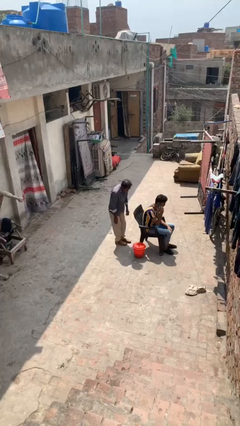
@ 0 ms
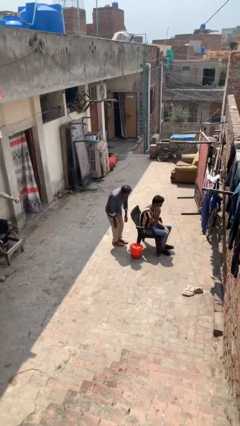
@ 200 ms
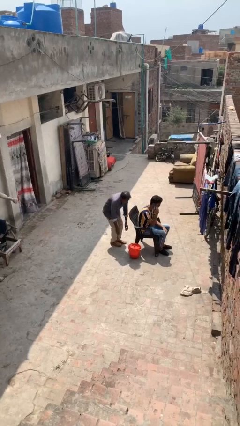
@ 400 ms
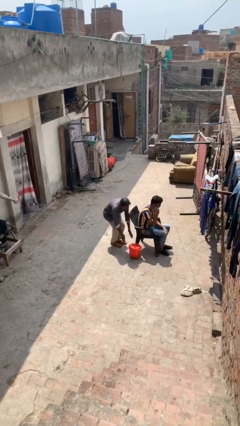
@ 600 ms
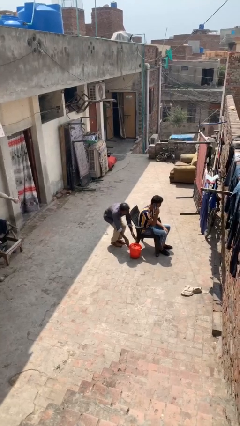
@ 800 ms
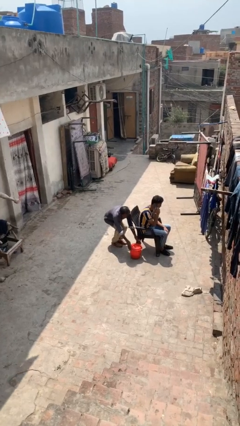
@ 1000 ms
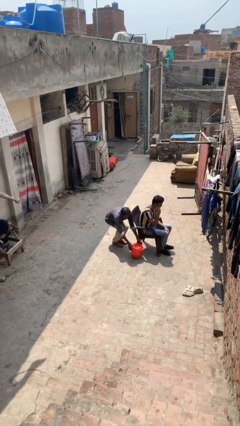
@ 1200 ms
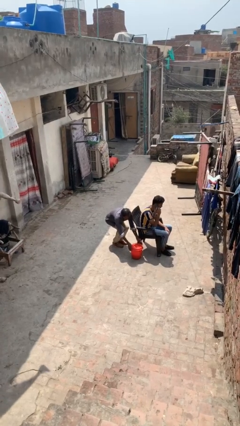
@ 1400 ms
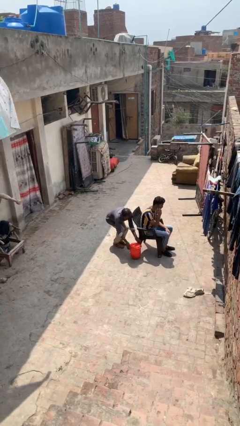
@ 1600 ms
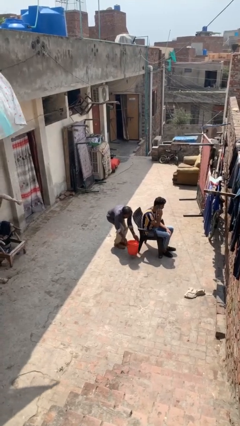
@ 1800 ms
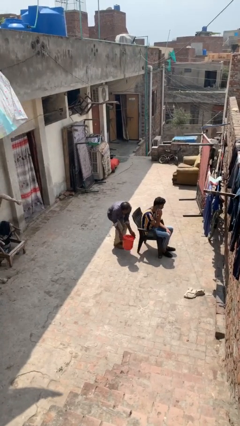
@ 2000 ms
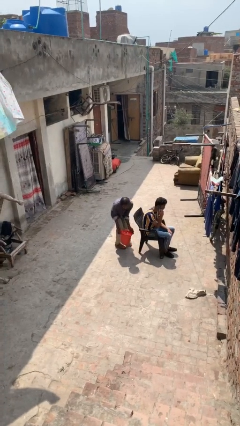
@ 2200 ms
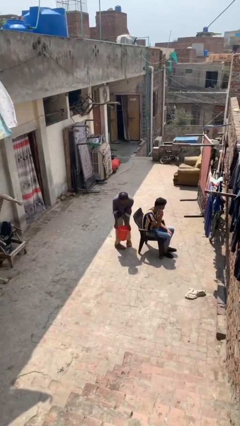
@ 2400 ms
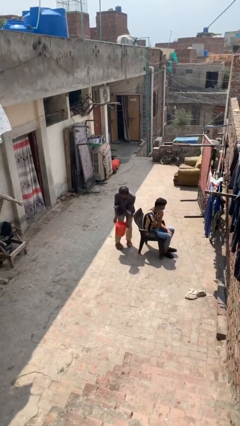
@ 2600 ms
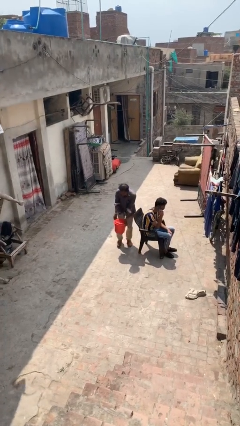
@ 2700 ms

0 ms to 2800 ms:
person steals object from person

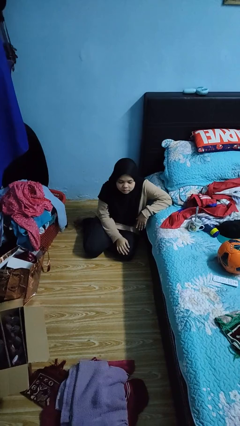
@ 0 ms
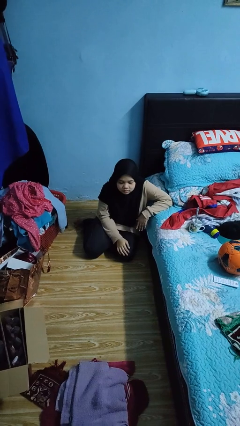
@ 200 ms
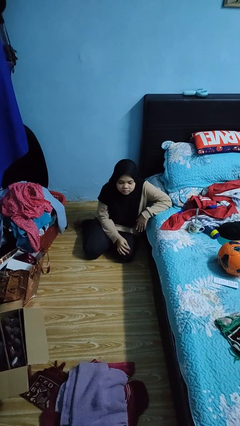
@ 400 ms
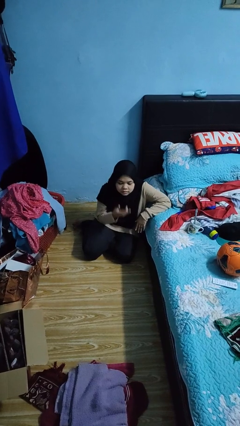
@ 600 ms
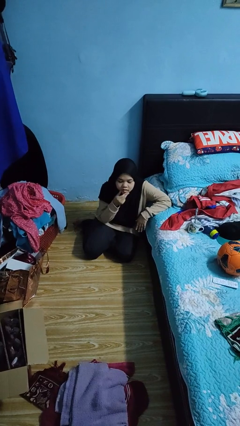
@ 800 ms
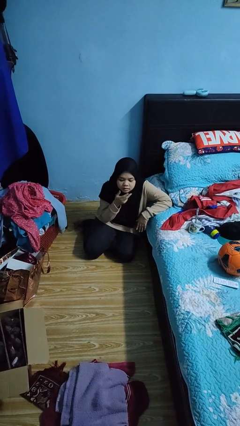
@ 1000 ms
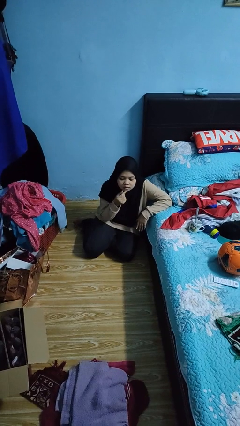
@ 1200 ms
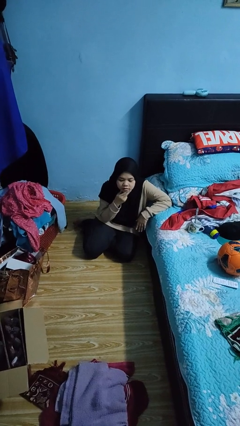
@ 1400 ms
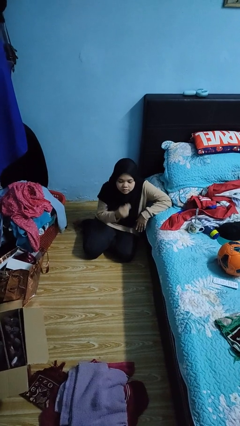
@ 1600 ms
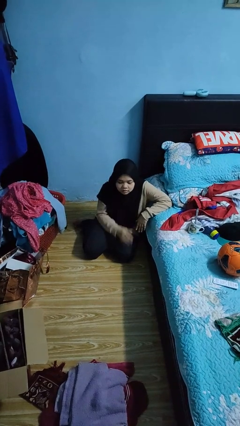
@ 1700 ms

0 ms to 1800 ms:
person strokes chin

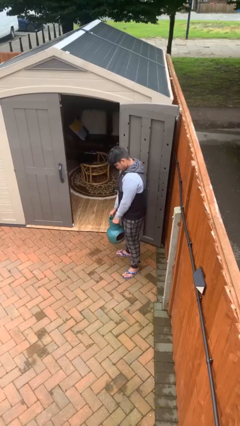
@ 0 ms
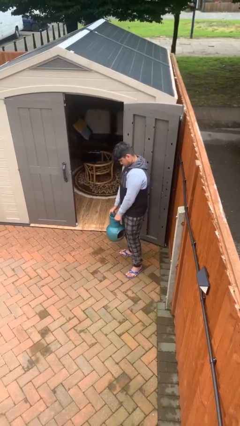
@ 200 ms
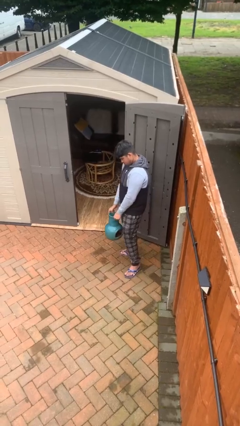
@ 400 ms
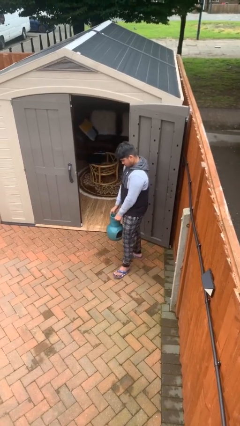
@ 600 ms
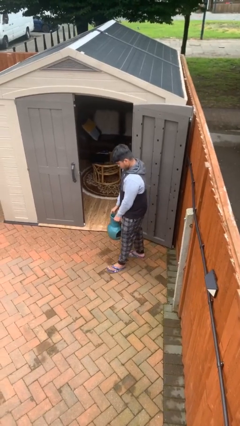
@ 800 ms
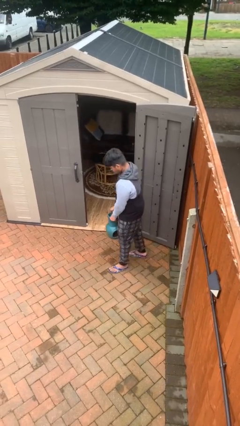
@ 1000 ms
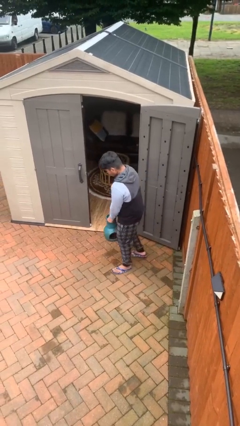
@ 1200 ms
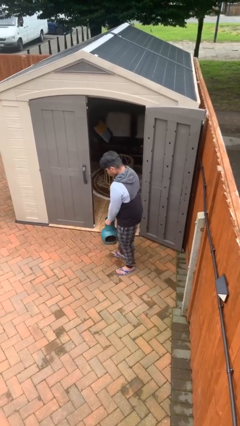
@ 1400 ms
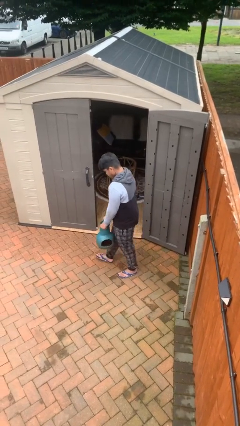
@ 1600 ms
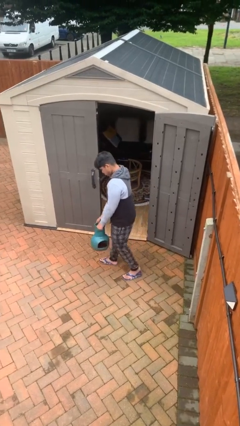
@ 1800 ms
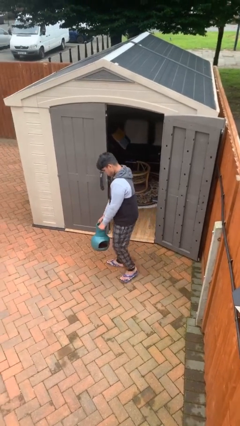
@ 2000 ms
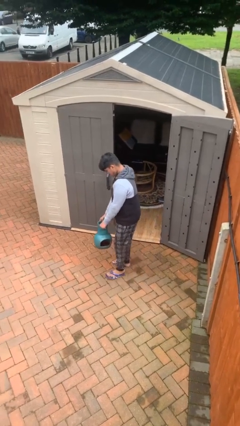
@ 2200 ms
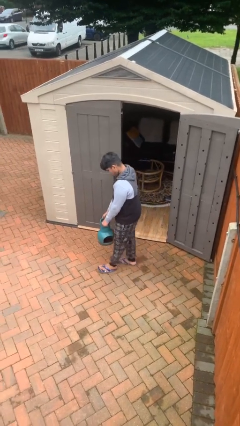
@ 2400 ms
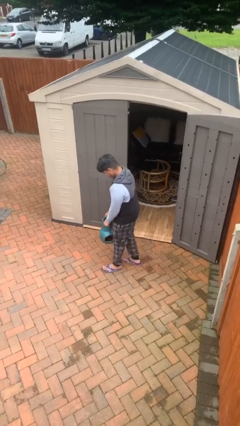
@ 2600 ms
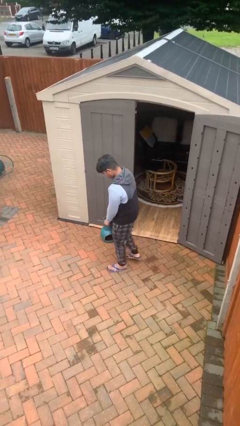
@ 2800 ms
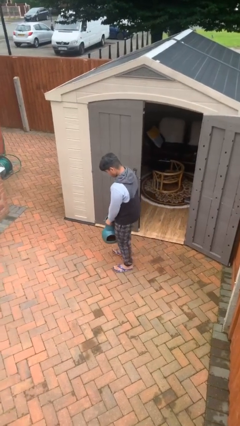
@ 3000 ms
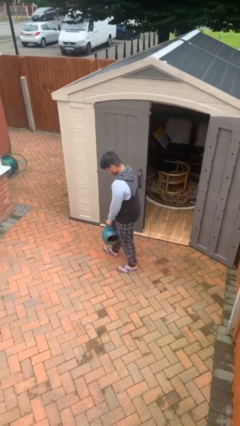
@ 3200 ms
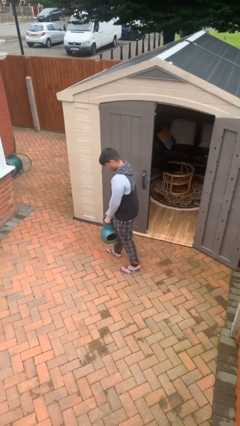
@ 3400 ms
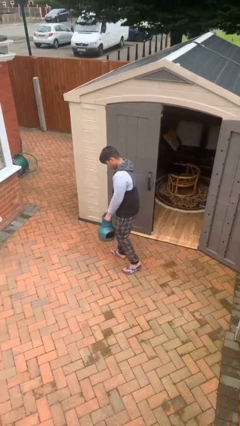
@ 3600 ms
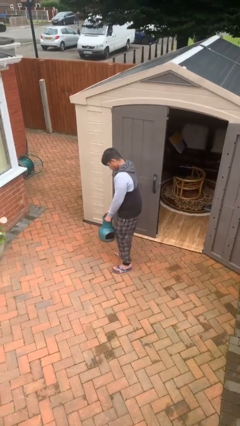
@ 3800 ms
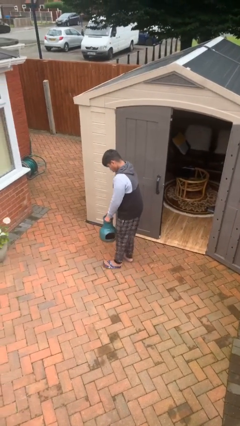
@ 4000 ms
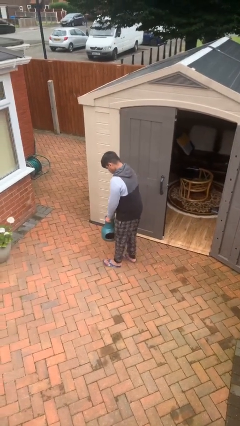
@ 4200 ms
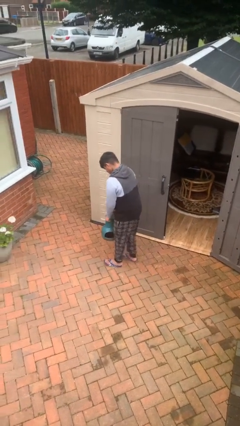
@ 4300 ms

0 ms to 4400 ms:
person carries heavy object

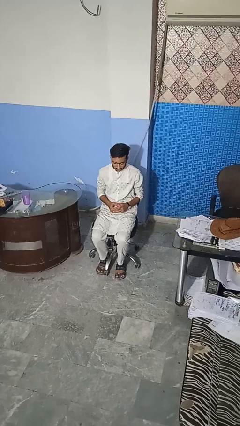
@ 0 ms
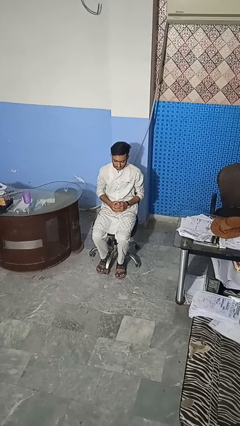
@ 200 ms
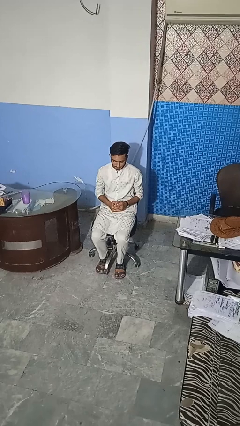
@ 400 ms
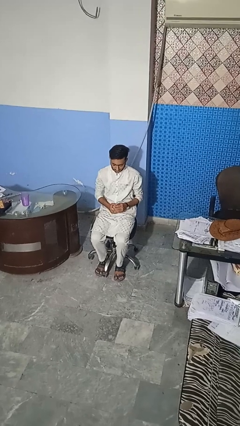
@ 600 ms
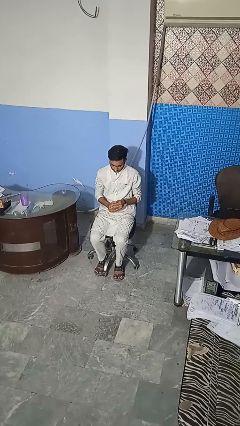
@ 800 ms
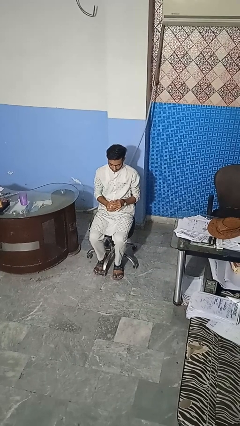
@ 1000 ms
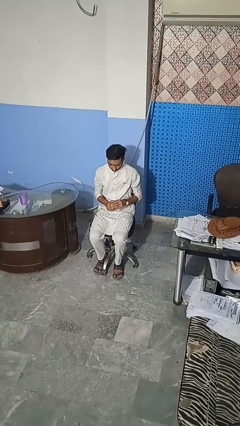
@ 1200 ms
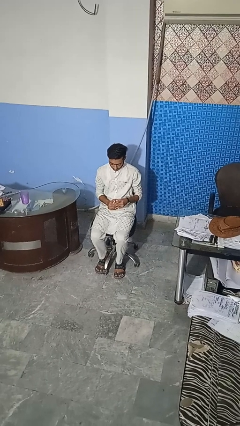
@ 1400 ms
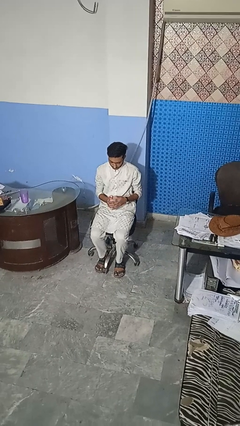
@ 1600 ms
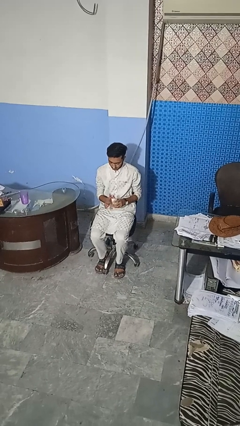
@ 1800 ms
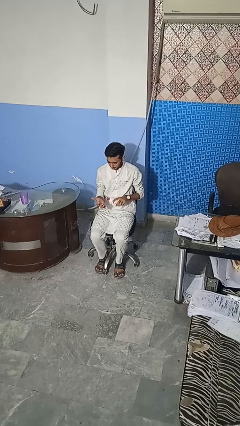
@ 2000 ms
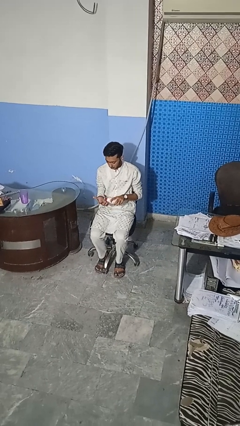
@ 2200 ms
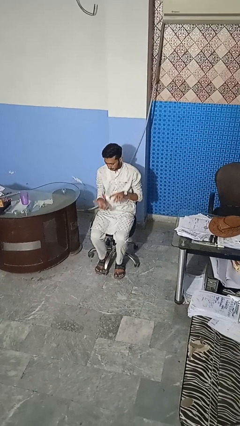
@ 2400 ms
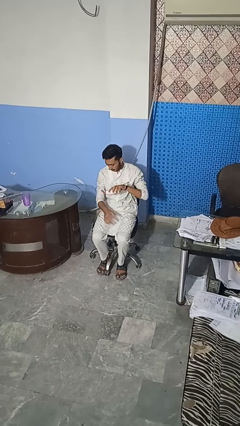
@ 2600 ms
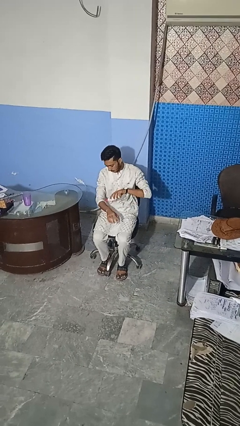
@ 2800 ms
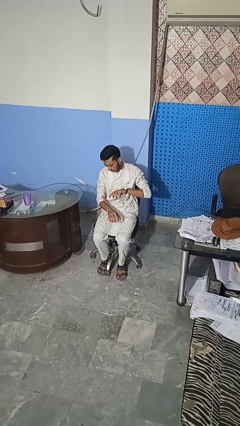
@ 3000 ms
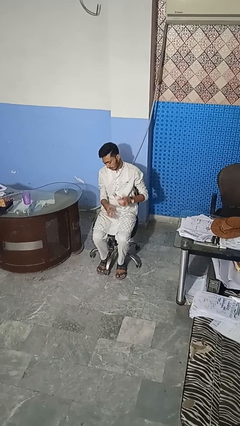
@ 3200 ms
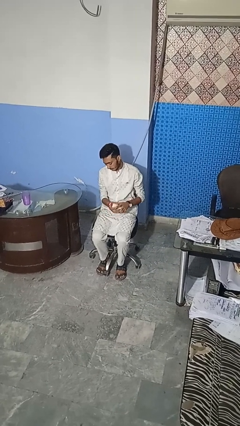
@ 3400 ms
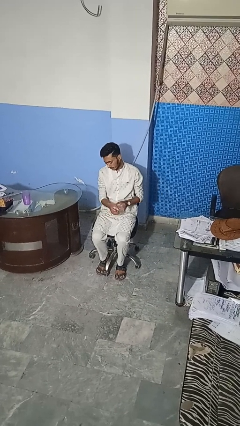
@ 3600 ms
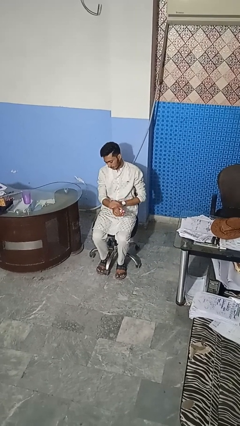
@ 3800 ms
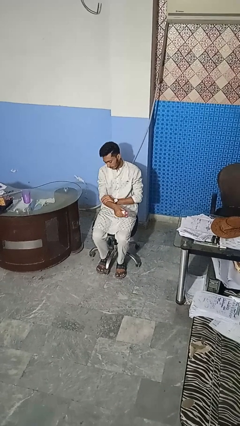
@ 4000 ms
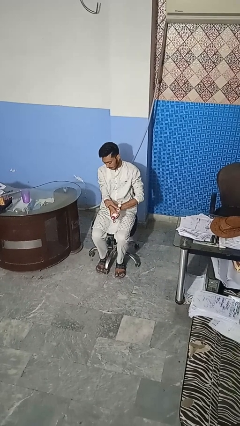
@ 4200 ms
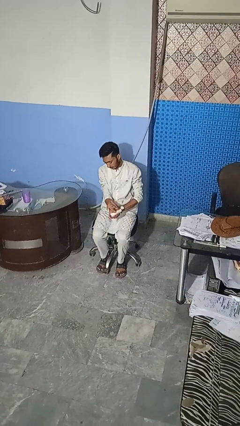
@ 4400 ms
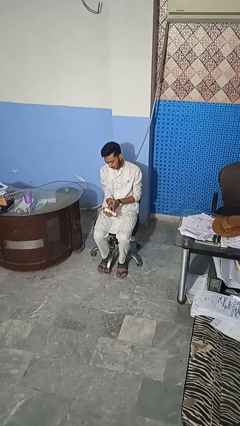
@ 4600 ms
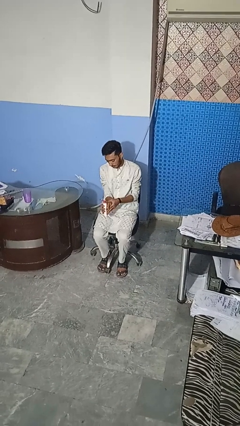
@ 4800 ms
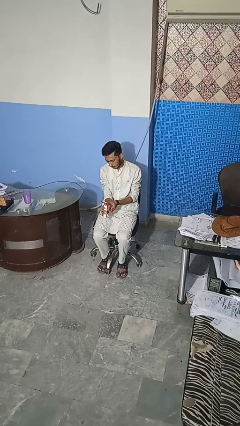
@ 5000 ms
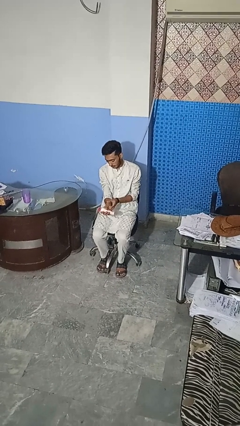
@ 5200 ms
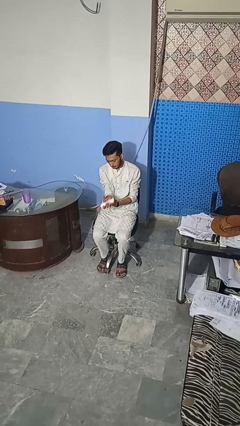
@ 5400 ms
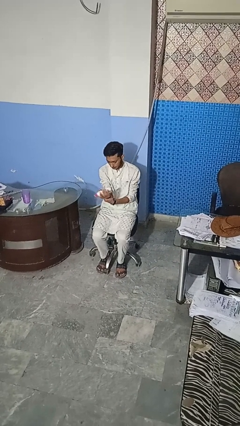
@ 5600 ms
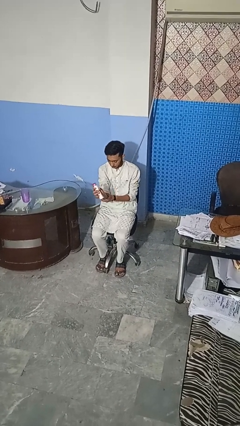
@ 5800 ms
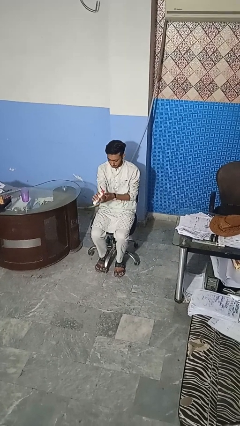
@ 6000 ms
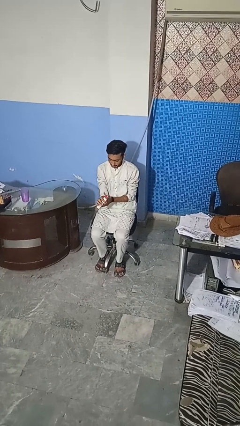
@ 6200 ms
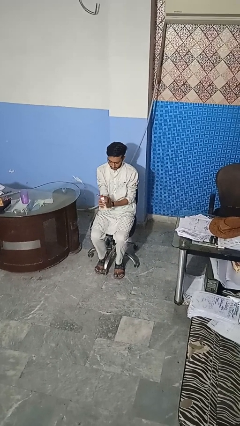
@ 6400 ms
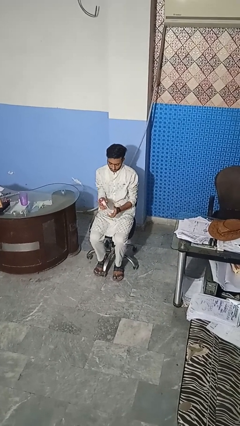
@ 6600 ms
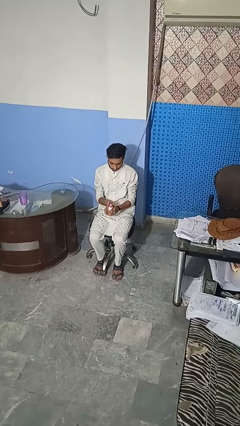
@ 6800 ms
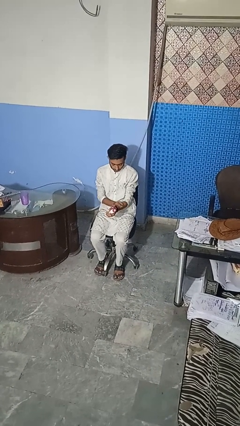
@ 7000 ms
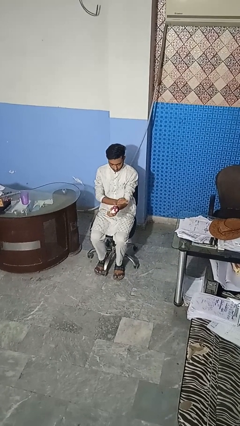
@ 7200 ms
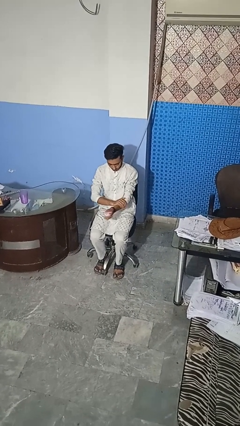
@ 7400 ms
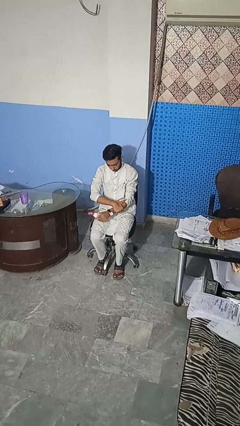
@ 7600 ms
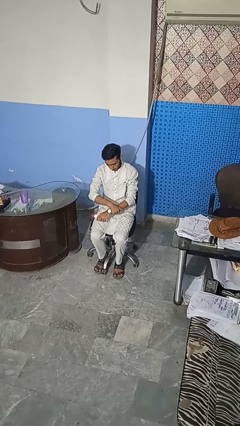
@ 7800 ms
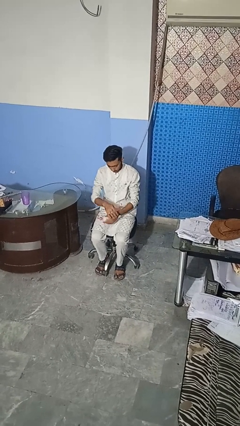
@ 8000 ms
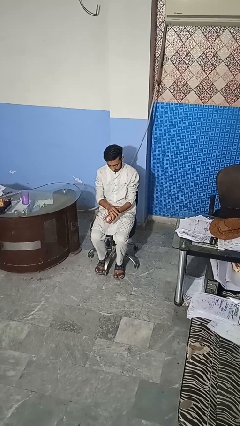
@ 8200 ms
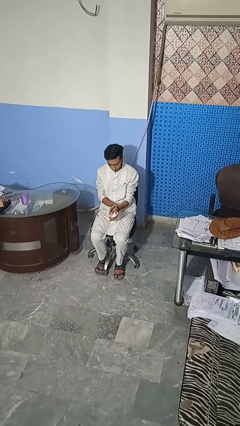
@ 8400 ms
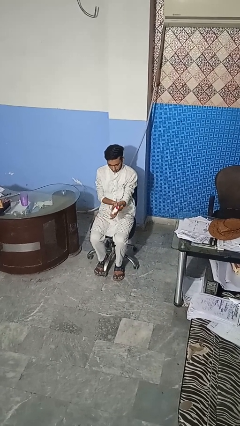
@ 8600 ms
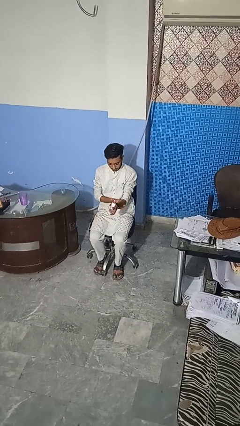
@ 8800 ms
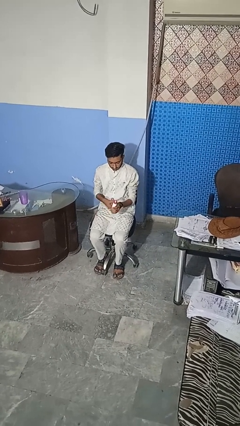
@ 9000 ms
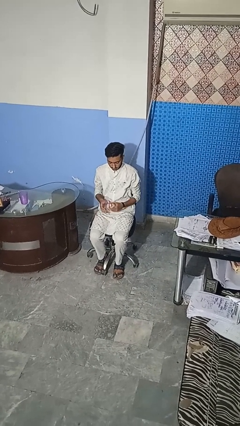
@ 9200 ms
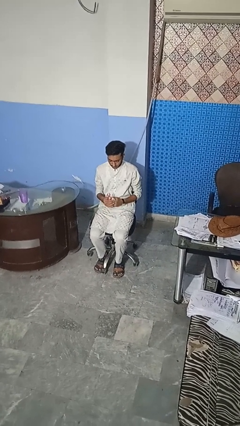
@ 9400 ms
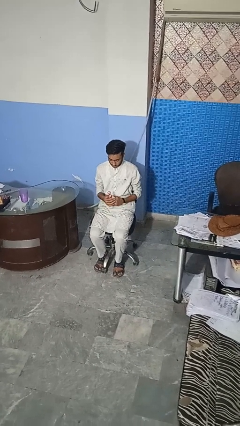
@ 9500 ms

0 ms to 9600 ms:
person applies sunscreen
